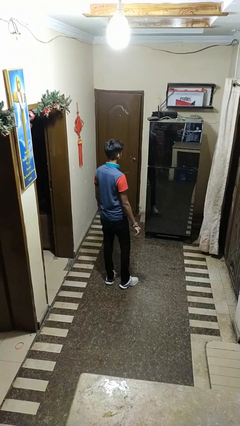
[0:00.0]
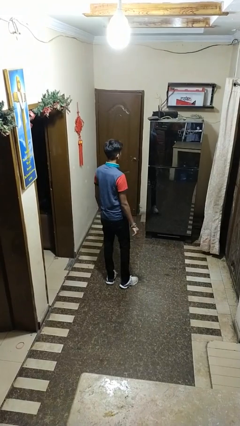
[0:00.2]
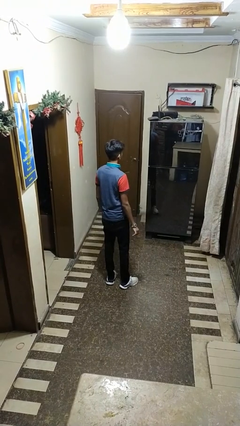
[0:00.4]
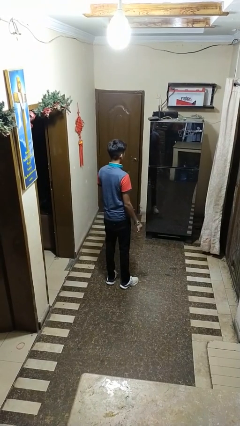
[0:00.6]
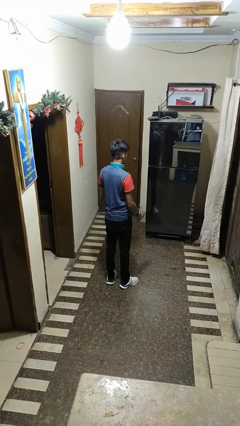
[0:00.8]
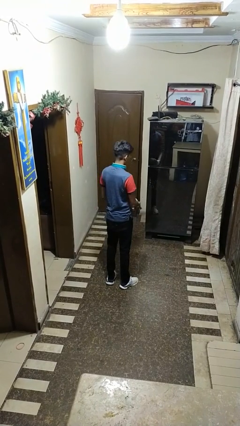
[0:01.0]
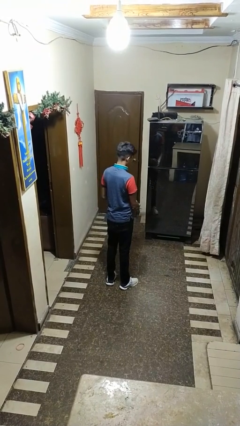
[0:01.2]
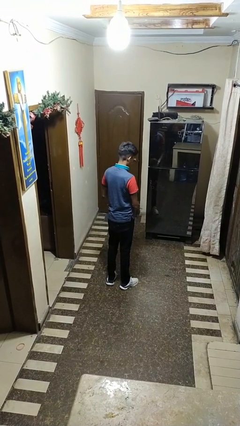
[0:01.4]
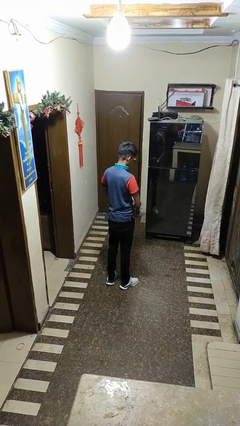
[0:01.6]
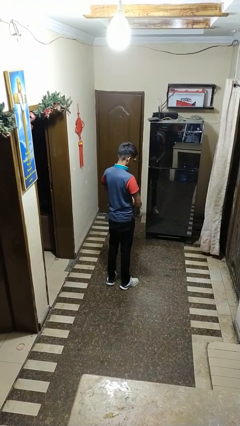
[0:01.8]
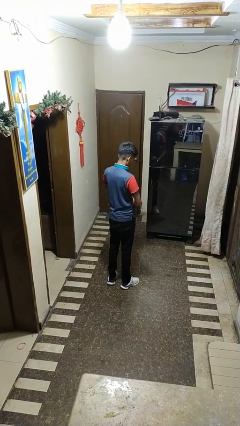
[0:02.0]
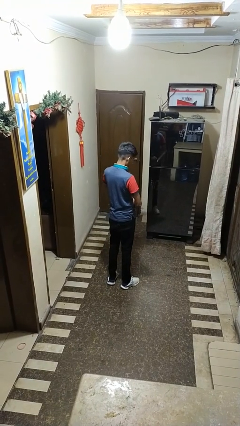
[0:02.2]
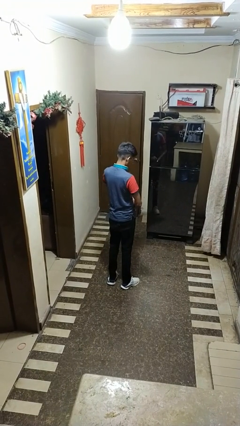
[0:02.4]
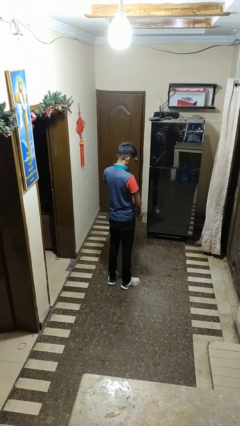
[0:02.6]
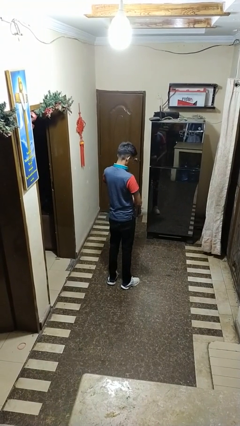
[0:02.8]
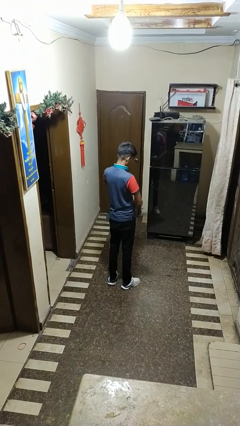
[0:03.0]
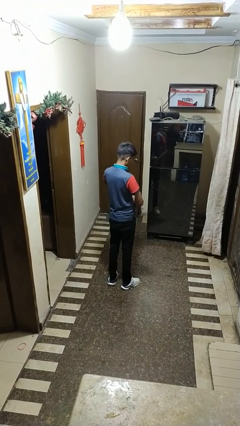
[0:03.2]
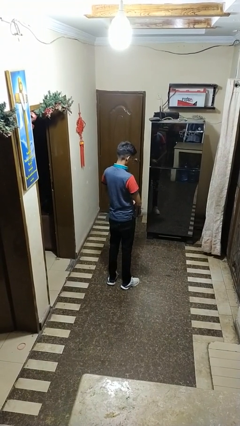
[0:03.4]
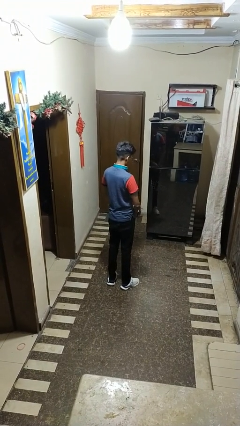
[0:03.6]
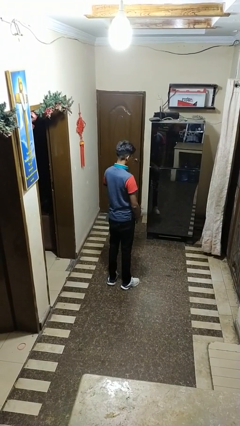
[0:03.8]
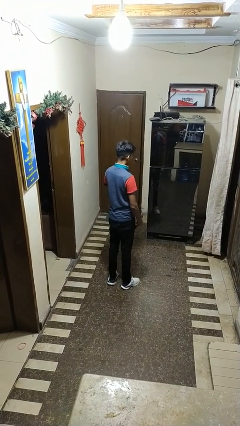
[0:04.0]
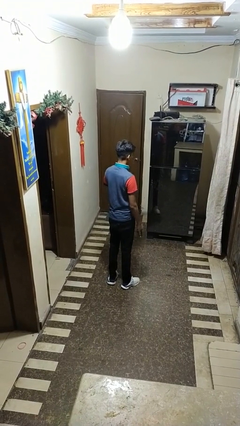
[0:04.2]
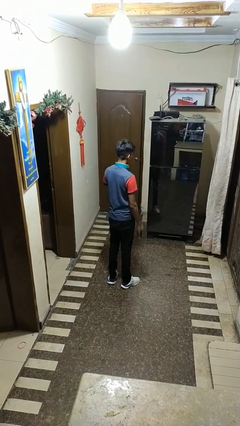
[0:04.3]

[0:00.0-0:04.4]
person takes off wristwatch

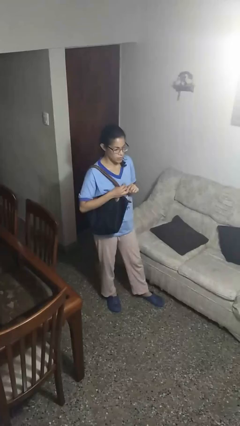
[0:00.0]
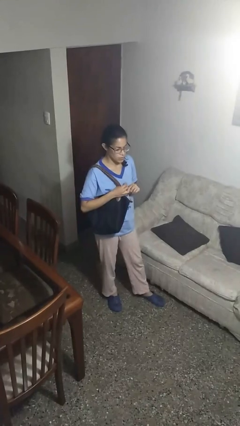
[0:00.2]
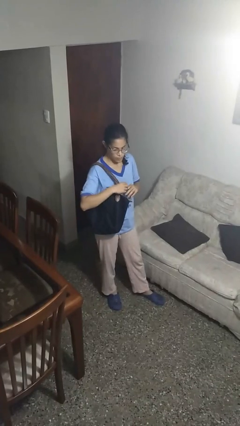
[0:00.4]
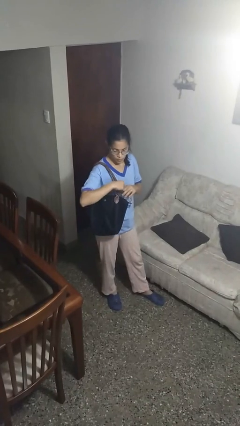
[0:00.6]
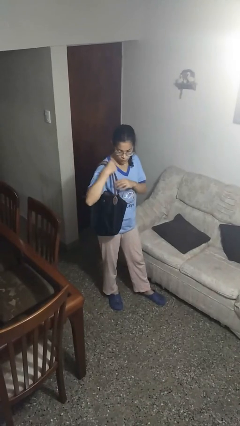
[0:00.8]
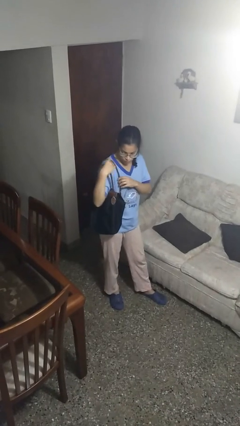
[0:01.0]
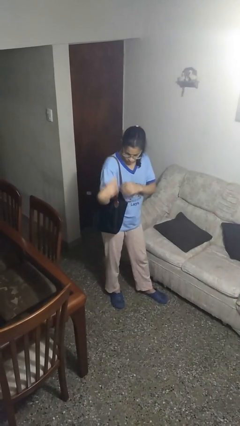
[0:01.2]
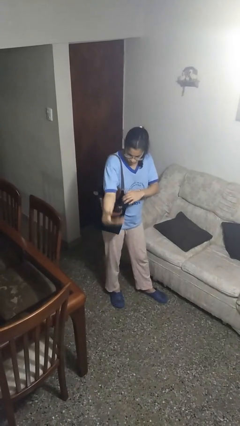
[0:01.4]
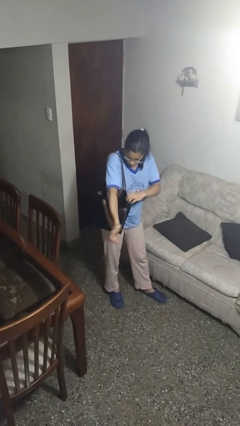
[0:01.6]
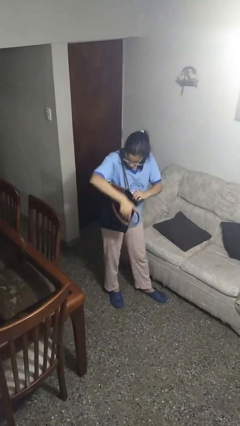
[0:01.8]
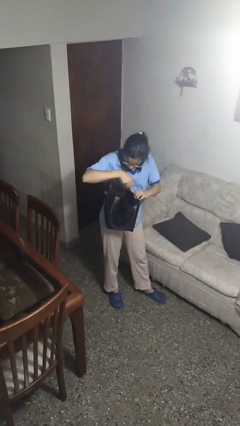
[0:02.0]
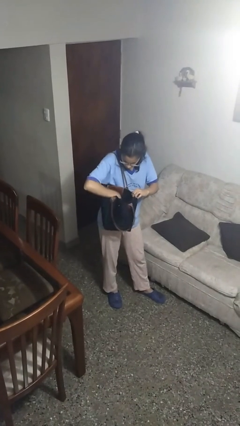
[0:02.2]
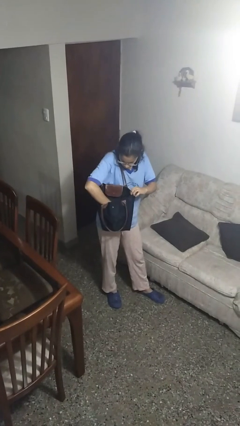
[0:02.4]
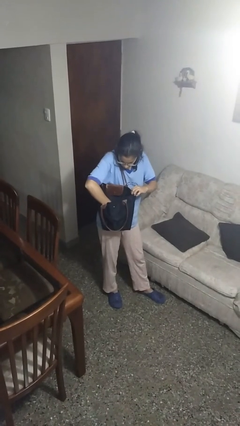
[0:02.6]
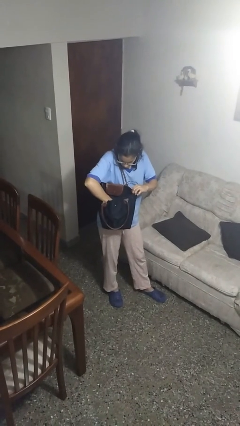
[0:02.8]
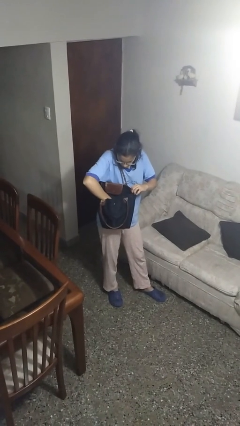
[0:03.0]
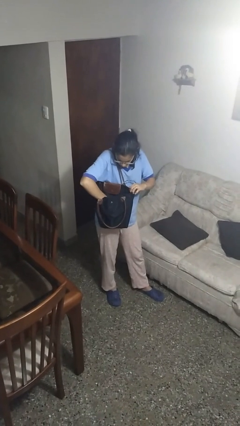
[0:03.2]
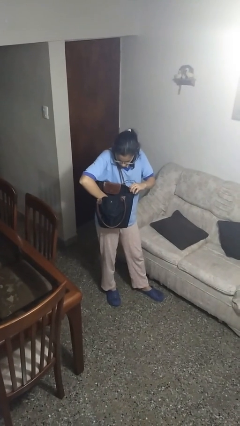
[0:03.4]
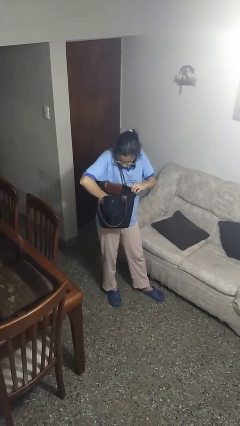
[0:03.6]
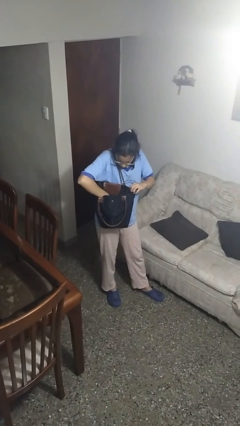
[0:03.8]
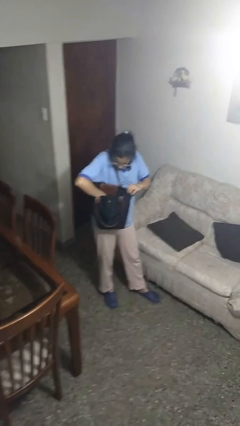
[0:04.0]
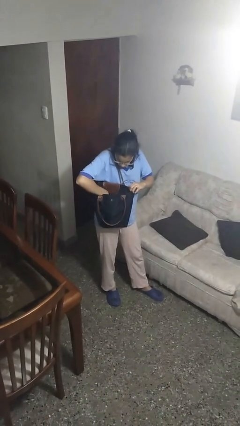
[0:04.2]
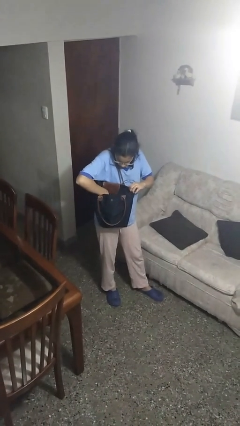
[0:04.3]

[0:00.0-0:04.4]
person searches in purse

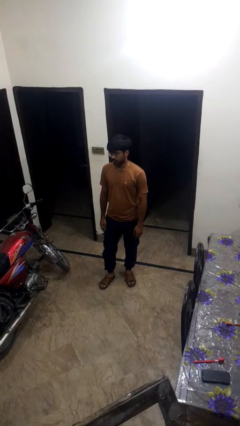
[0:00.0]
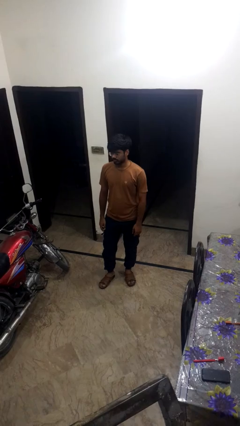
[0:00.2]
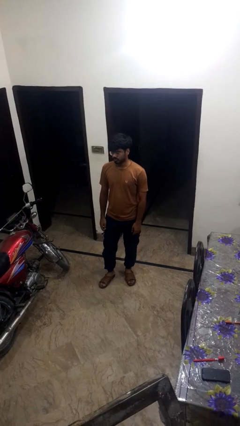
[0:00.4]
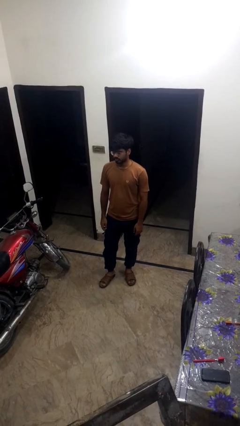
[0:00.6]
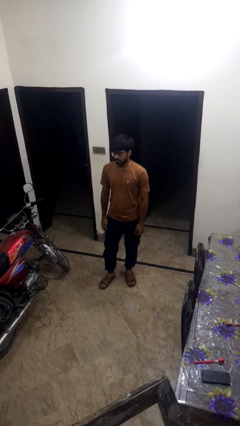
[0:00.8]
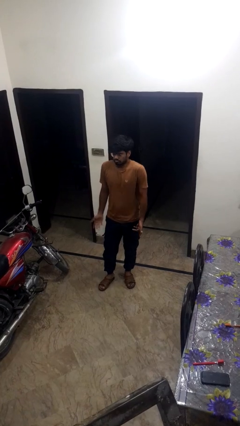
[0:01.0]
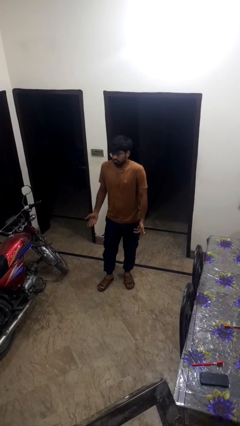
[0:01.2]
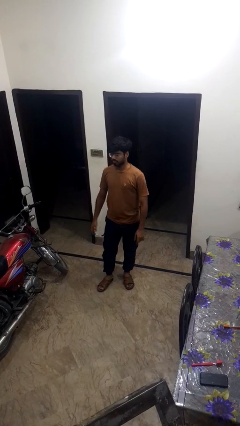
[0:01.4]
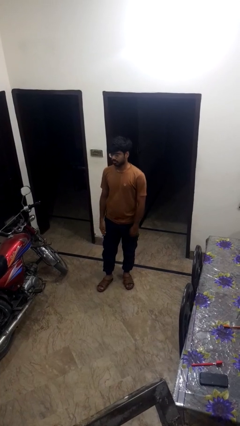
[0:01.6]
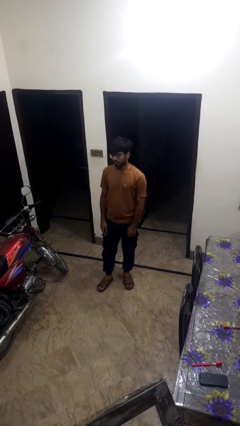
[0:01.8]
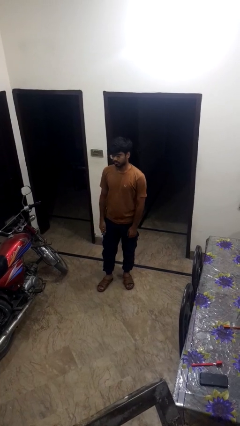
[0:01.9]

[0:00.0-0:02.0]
person shrugs

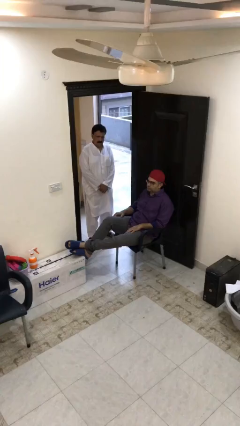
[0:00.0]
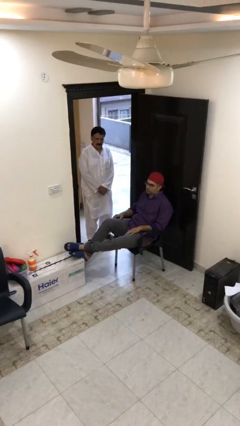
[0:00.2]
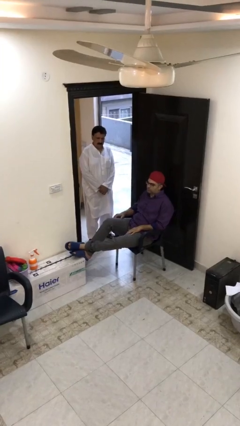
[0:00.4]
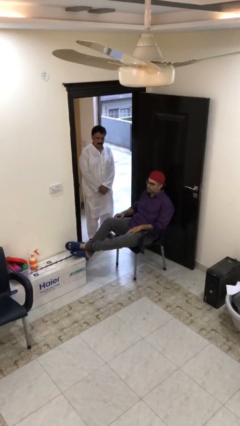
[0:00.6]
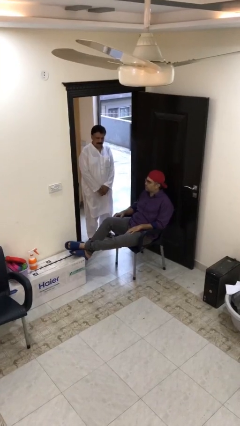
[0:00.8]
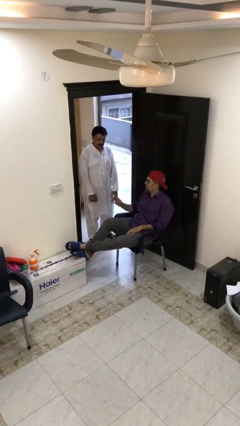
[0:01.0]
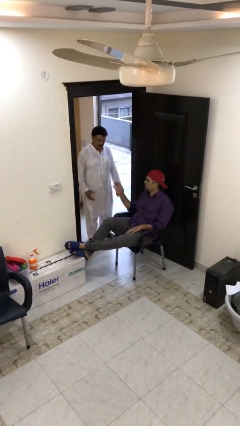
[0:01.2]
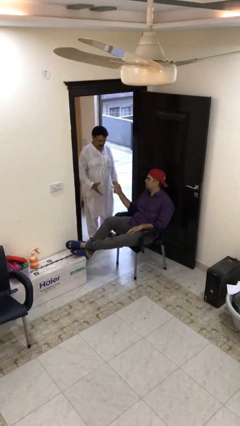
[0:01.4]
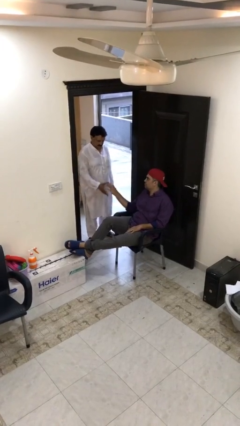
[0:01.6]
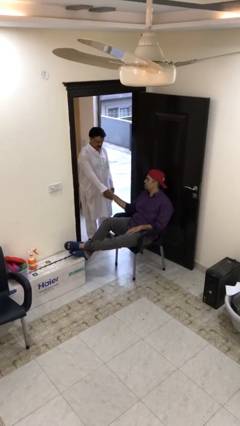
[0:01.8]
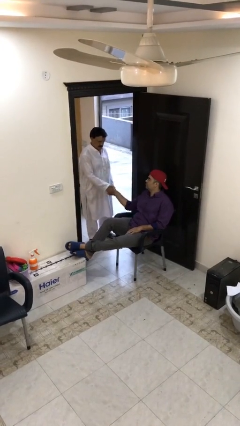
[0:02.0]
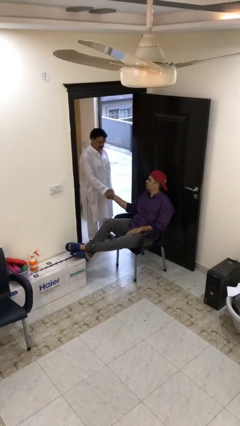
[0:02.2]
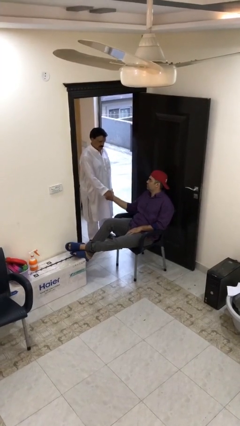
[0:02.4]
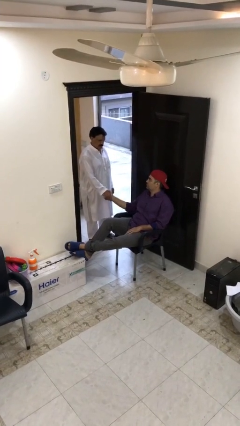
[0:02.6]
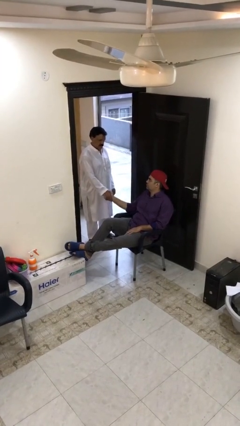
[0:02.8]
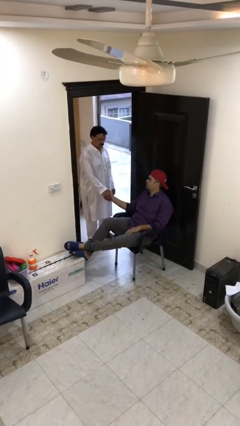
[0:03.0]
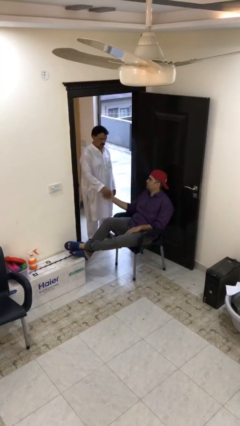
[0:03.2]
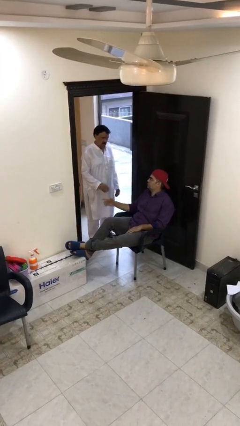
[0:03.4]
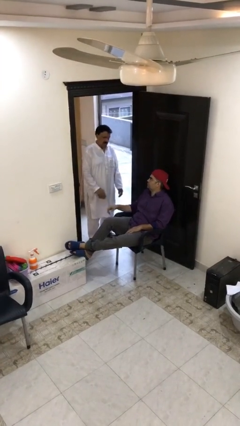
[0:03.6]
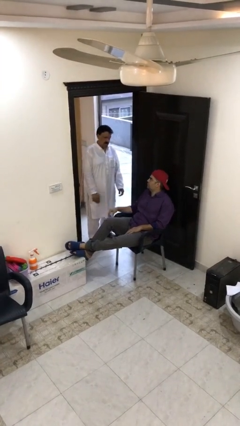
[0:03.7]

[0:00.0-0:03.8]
person shakes hand

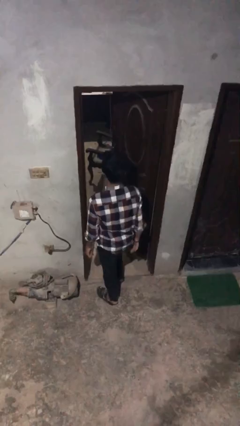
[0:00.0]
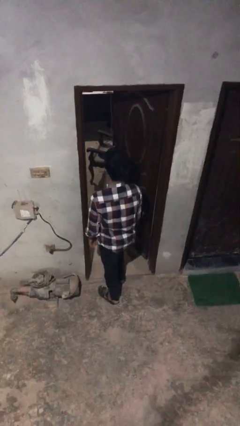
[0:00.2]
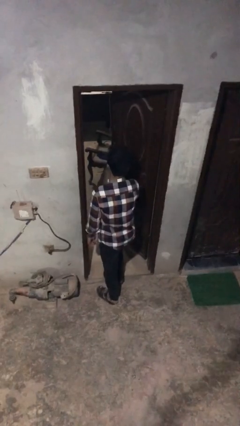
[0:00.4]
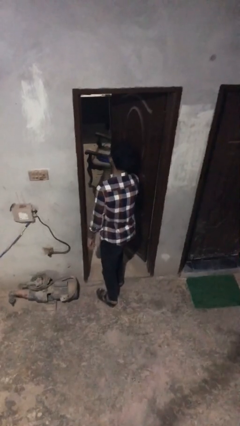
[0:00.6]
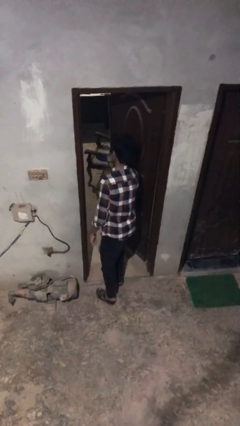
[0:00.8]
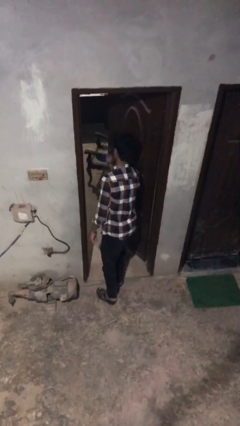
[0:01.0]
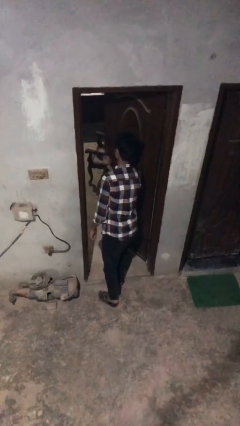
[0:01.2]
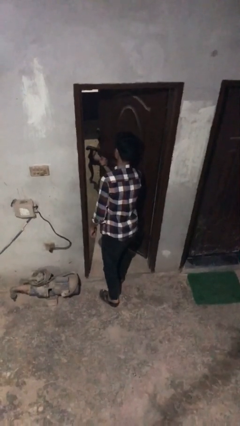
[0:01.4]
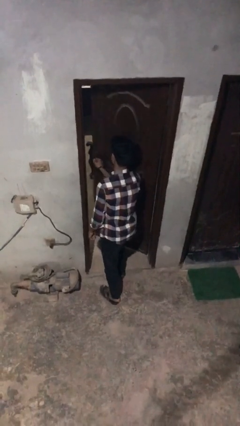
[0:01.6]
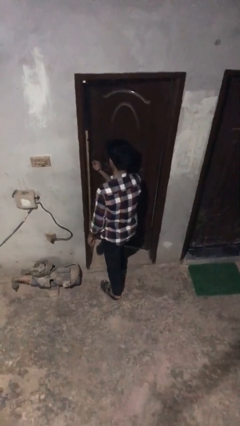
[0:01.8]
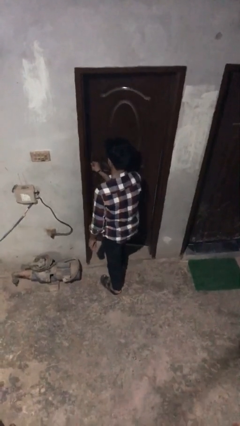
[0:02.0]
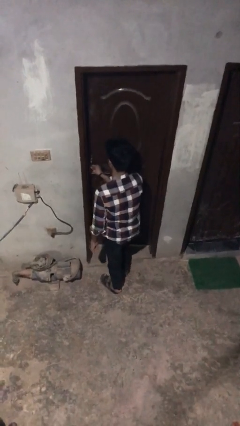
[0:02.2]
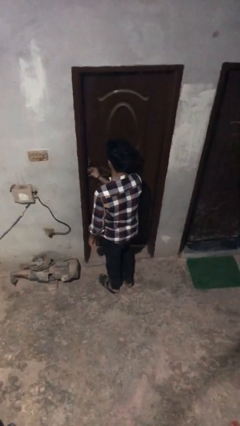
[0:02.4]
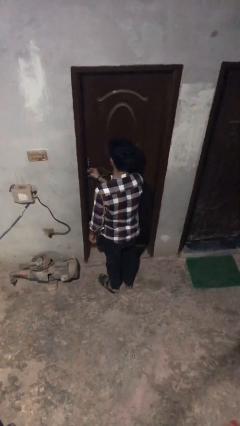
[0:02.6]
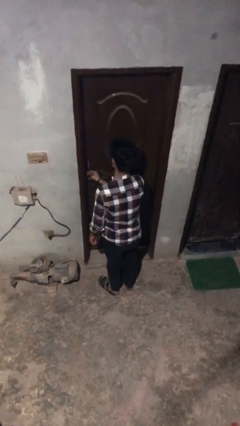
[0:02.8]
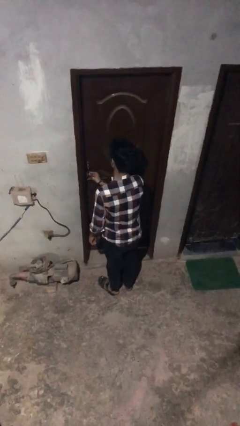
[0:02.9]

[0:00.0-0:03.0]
person closes facility door
